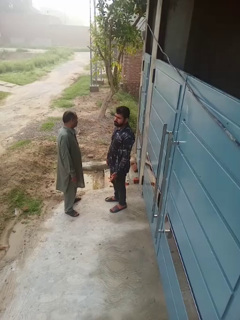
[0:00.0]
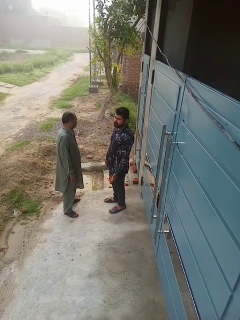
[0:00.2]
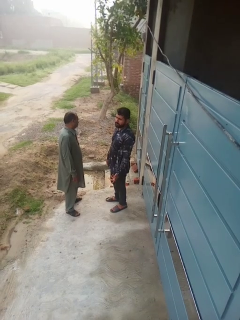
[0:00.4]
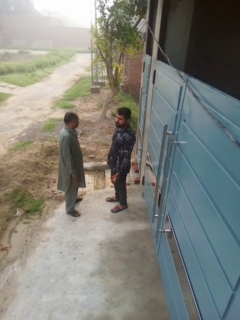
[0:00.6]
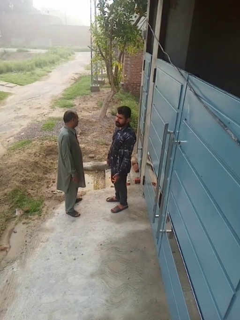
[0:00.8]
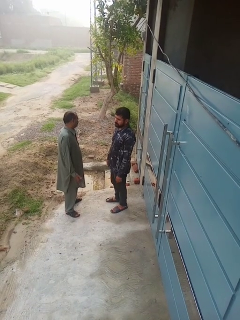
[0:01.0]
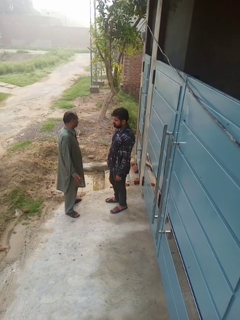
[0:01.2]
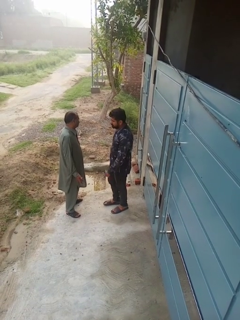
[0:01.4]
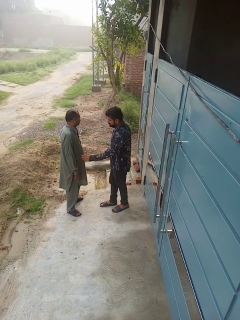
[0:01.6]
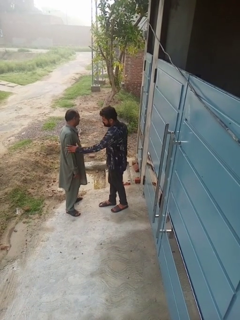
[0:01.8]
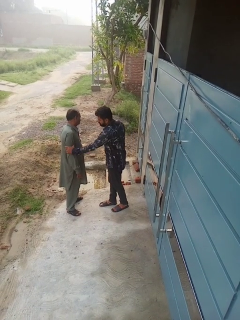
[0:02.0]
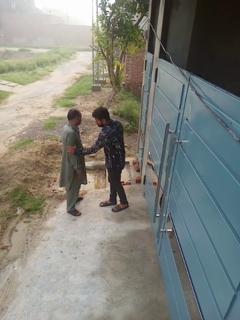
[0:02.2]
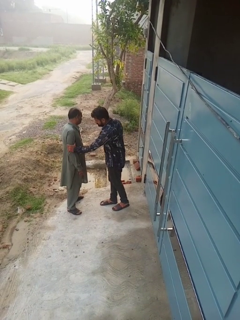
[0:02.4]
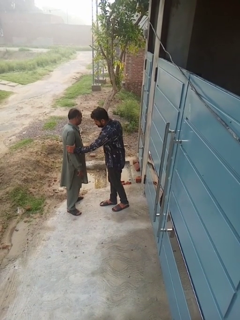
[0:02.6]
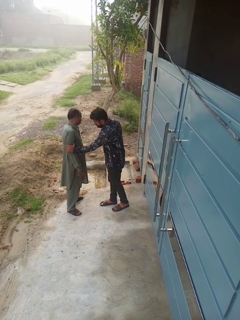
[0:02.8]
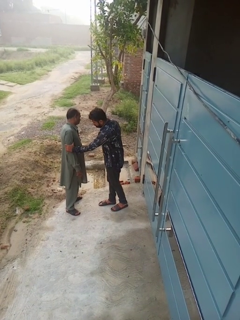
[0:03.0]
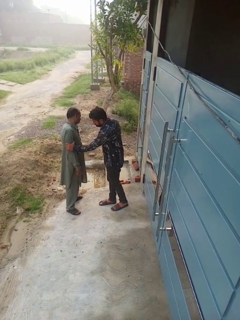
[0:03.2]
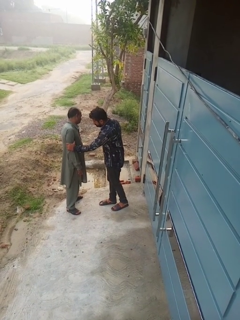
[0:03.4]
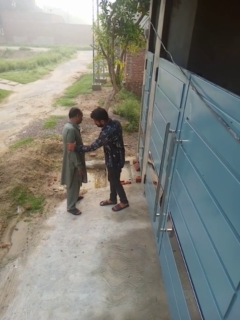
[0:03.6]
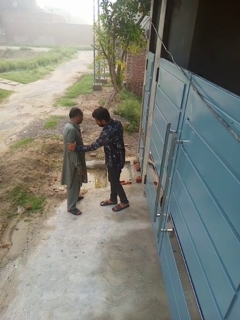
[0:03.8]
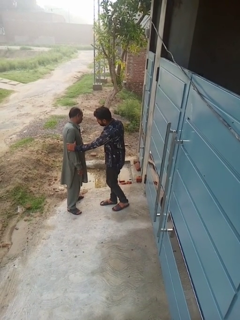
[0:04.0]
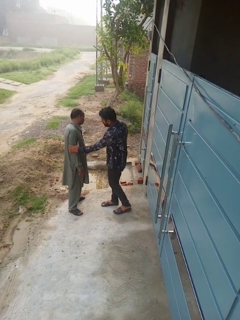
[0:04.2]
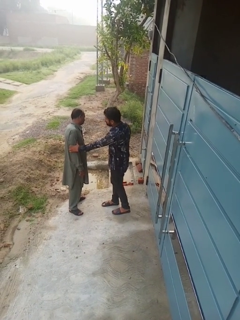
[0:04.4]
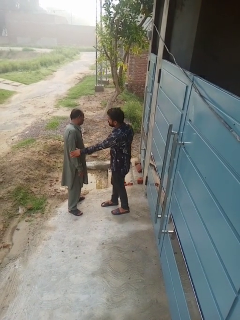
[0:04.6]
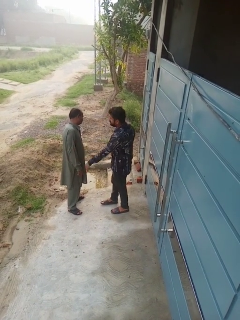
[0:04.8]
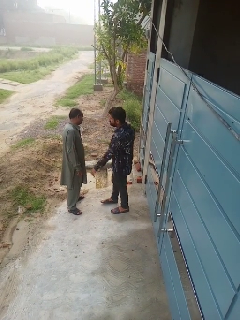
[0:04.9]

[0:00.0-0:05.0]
person grabs person by forearm

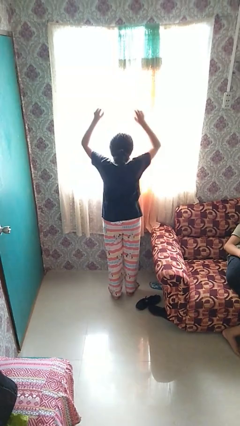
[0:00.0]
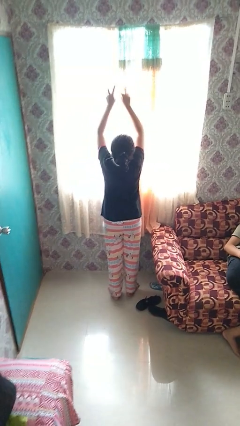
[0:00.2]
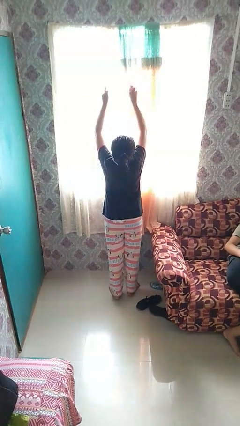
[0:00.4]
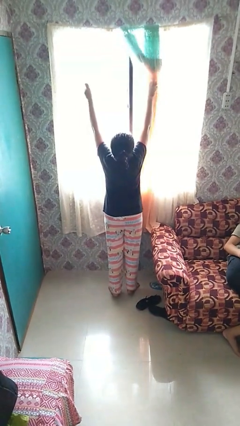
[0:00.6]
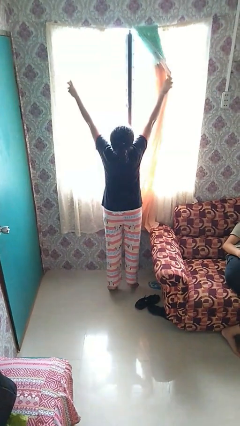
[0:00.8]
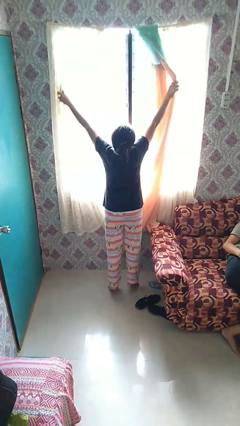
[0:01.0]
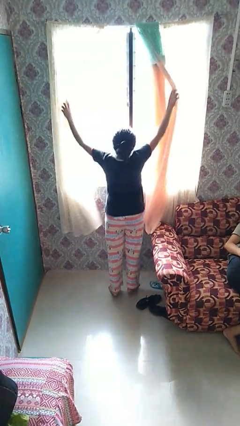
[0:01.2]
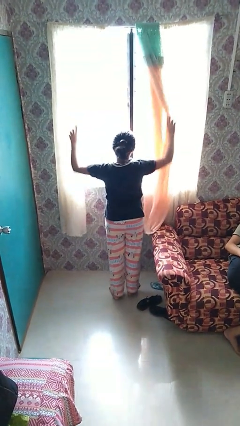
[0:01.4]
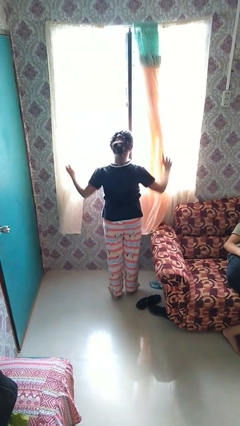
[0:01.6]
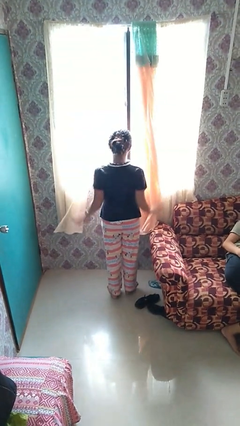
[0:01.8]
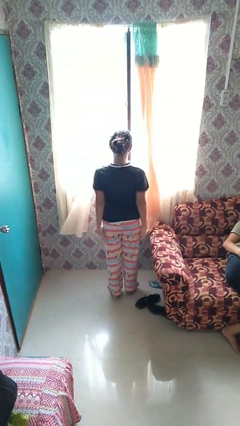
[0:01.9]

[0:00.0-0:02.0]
person opens curtains

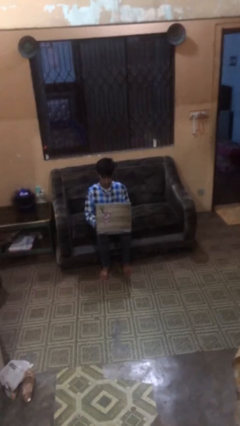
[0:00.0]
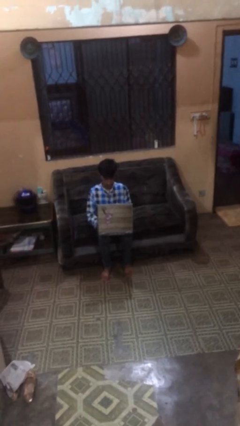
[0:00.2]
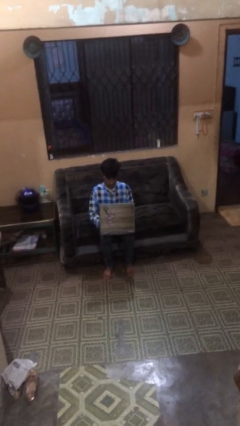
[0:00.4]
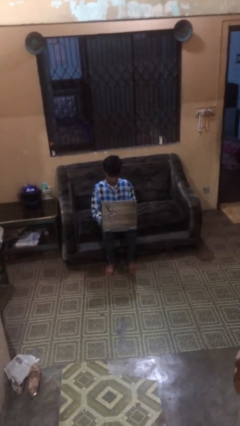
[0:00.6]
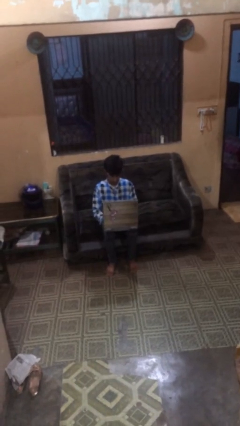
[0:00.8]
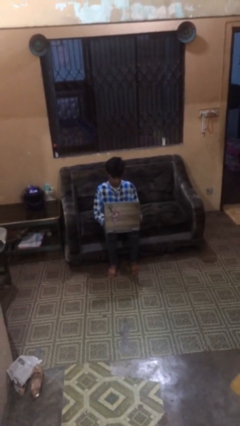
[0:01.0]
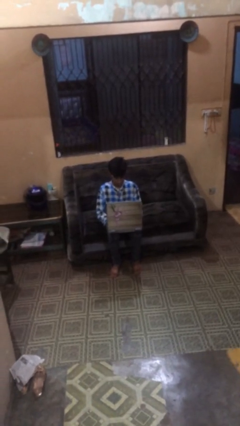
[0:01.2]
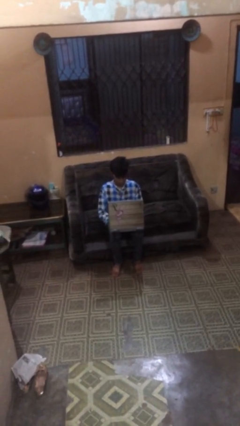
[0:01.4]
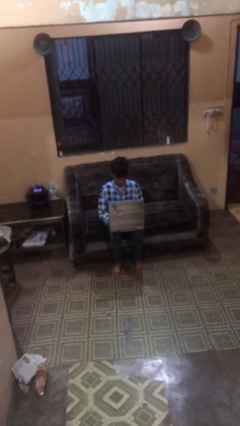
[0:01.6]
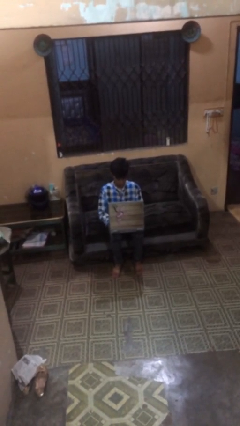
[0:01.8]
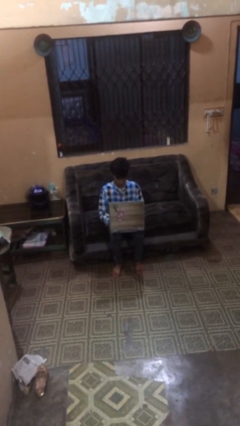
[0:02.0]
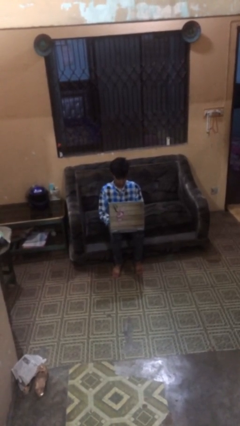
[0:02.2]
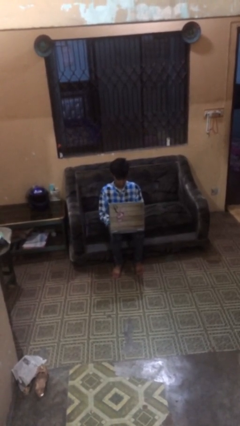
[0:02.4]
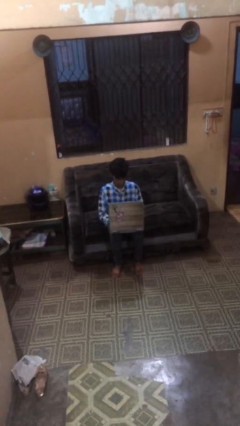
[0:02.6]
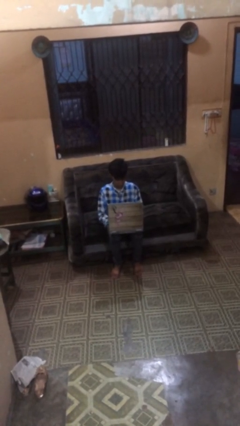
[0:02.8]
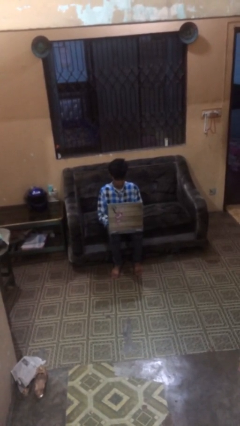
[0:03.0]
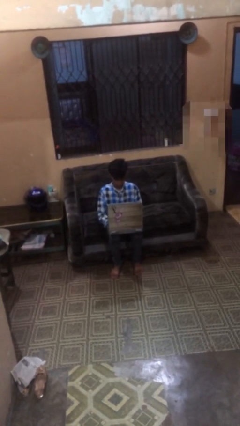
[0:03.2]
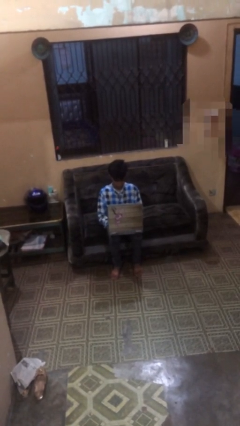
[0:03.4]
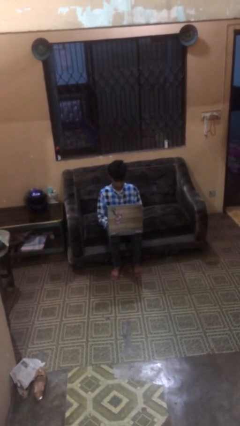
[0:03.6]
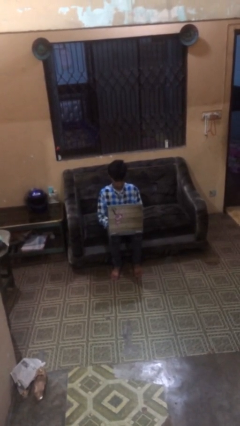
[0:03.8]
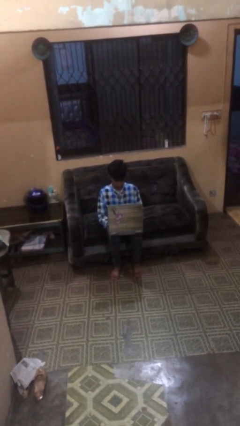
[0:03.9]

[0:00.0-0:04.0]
person interacts with laptop

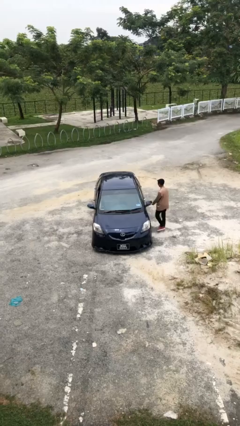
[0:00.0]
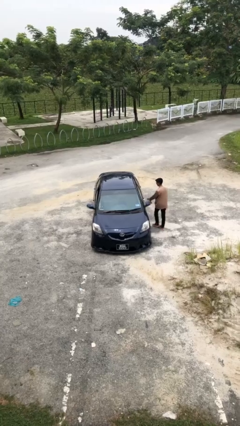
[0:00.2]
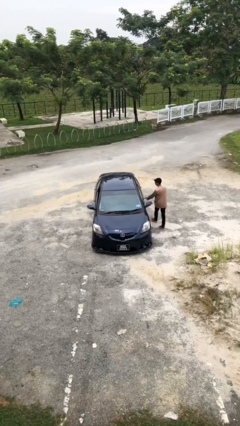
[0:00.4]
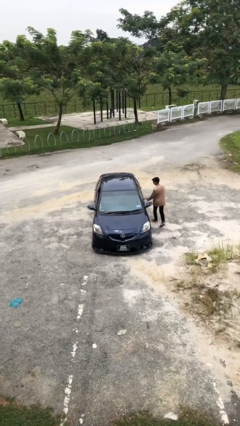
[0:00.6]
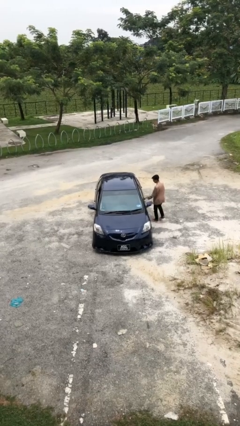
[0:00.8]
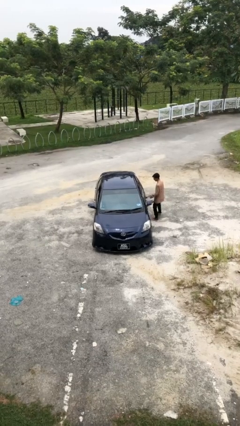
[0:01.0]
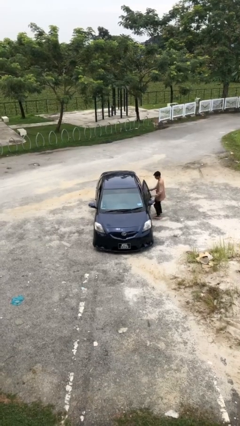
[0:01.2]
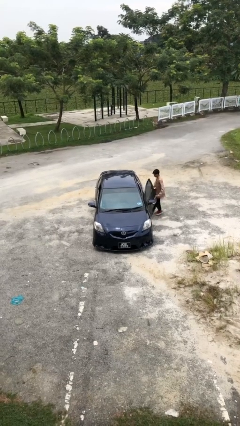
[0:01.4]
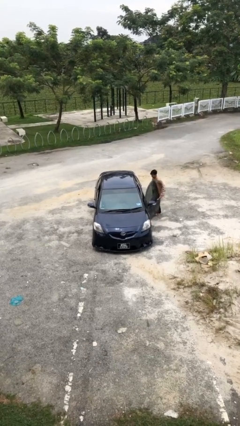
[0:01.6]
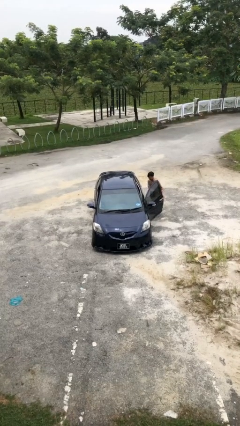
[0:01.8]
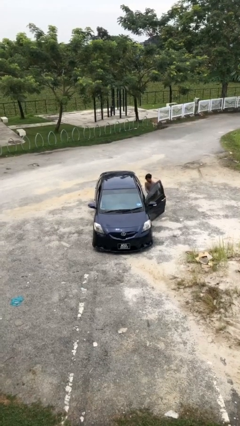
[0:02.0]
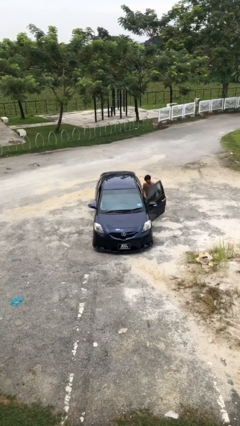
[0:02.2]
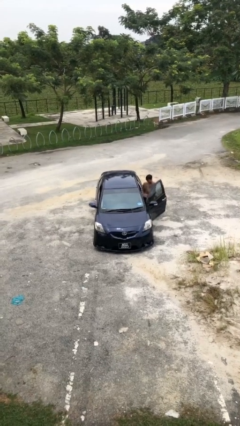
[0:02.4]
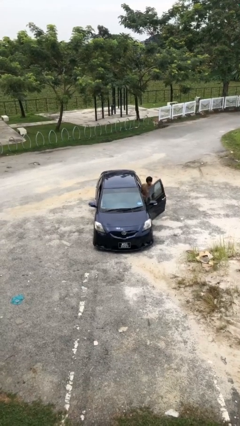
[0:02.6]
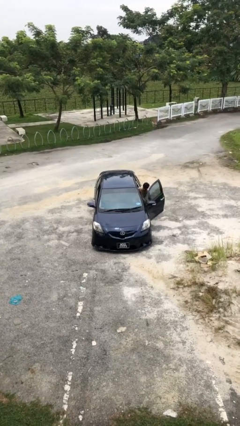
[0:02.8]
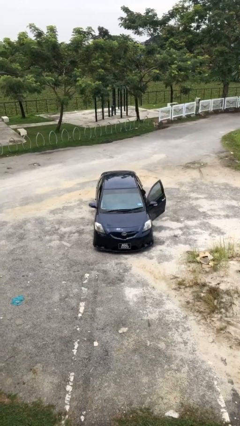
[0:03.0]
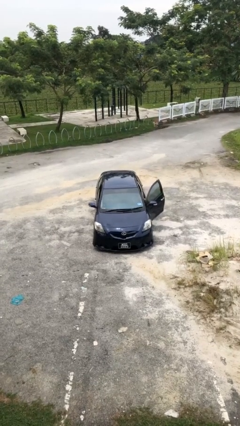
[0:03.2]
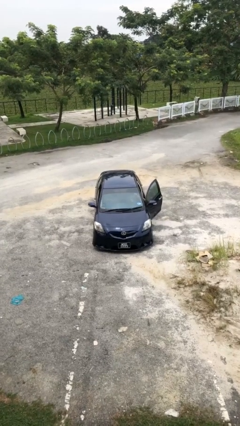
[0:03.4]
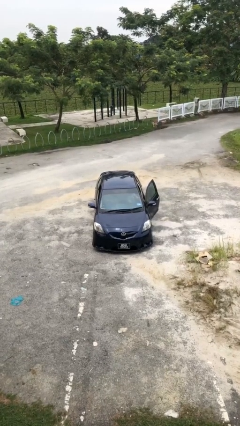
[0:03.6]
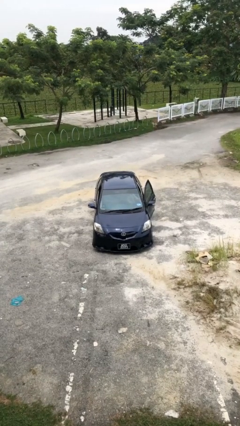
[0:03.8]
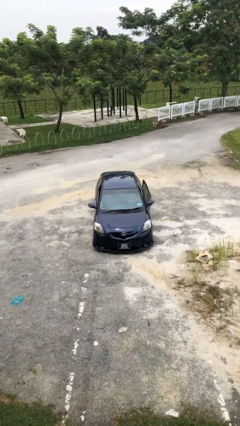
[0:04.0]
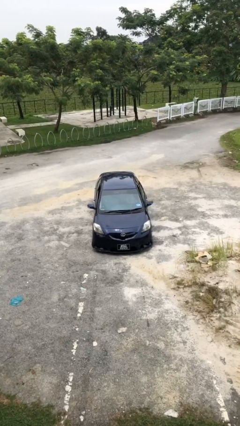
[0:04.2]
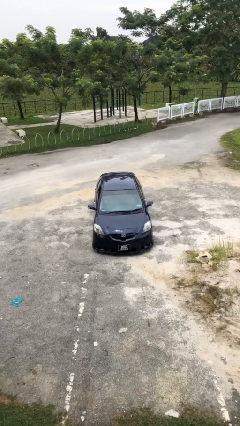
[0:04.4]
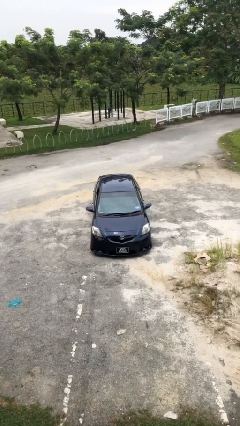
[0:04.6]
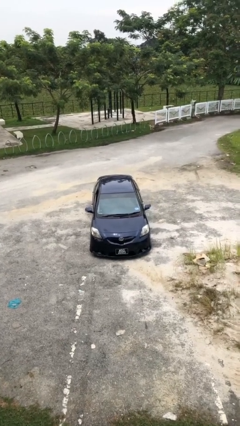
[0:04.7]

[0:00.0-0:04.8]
car picks up person

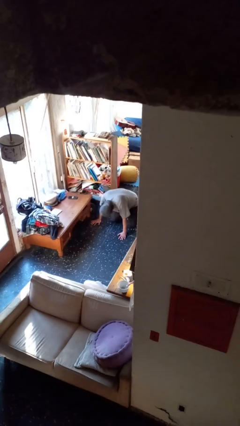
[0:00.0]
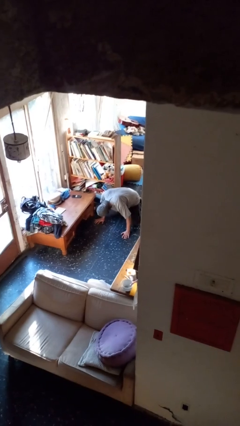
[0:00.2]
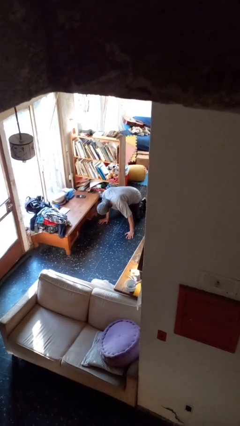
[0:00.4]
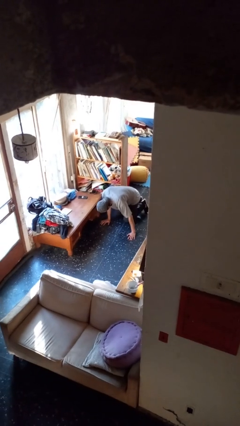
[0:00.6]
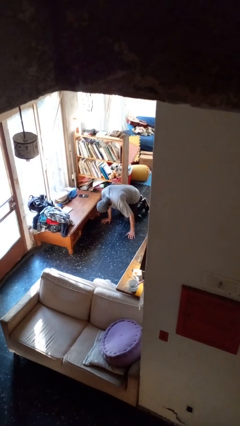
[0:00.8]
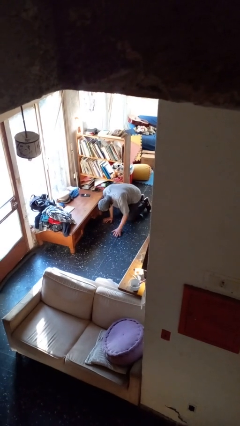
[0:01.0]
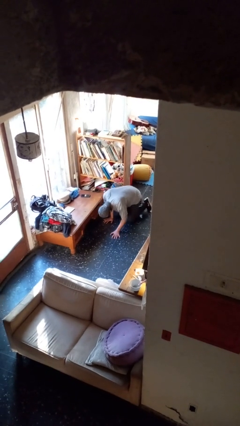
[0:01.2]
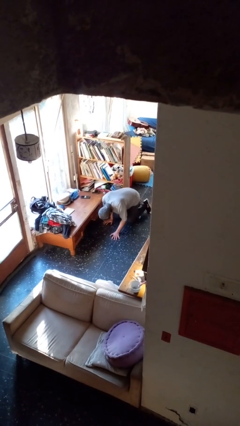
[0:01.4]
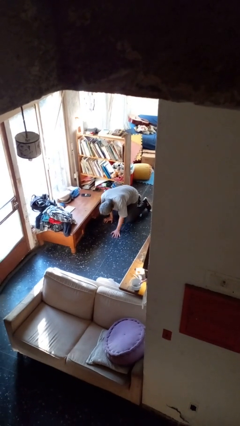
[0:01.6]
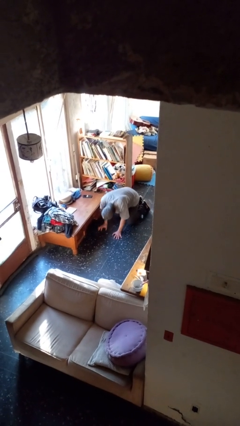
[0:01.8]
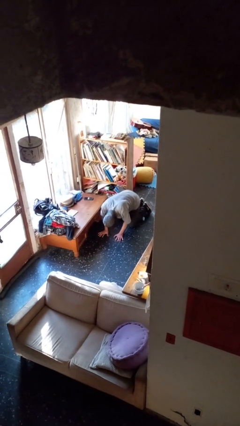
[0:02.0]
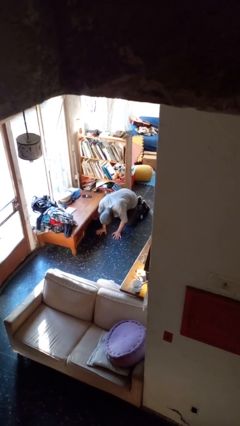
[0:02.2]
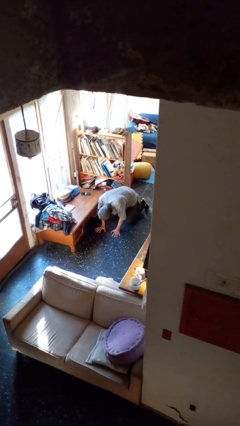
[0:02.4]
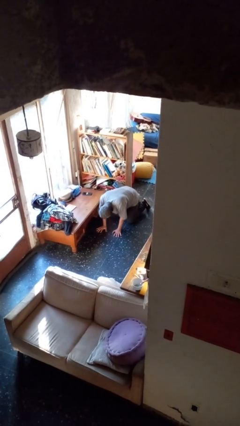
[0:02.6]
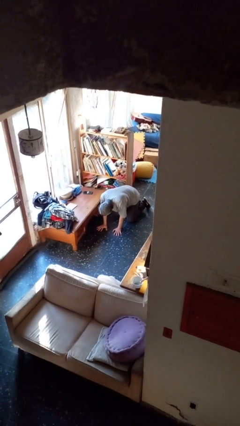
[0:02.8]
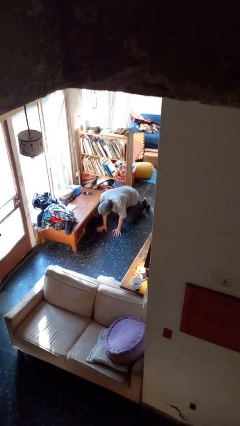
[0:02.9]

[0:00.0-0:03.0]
person crawls
